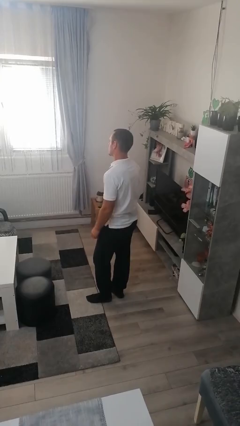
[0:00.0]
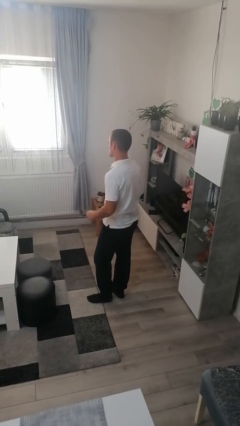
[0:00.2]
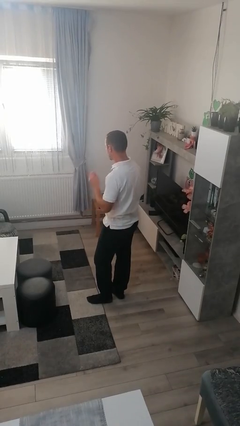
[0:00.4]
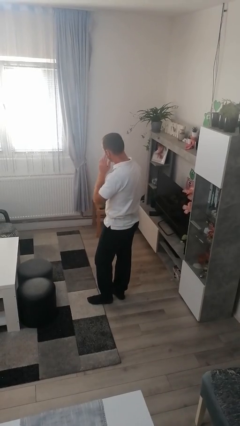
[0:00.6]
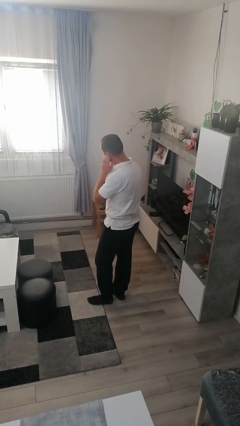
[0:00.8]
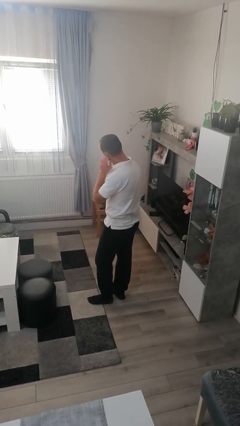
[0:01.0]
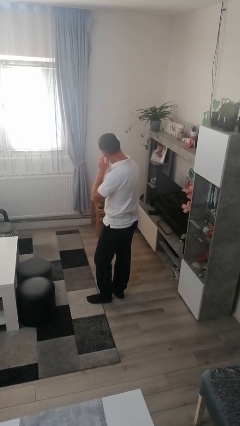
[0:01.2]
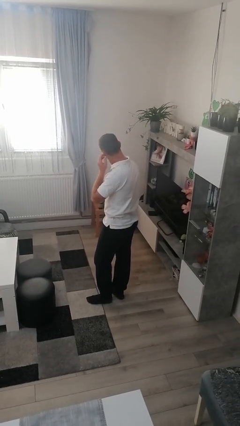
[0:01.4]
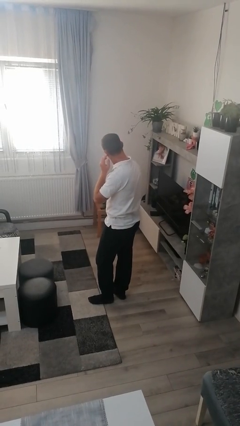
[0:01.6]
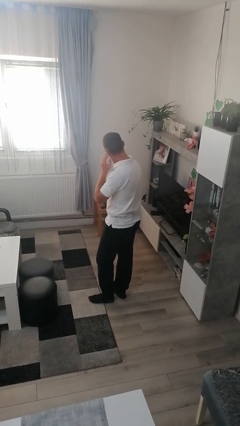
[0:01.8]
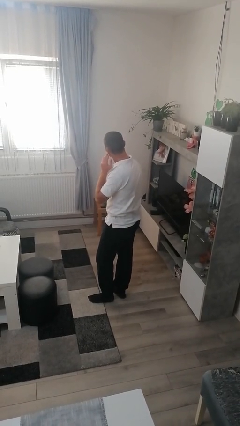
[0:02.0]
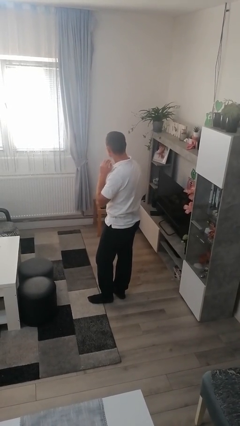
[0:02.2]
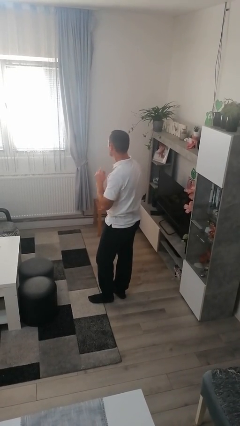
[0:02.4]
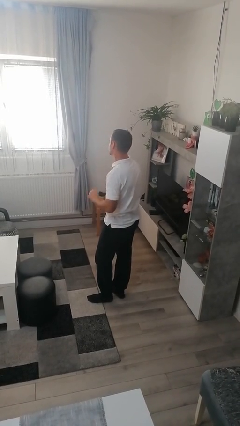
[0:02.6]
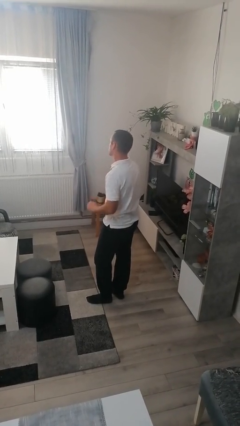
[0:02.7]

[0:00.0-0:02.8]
person touches earlobe

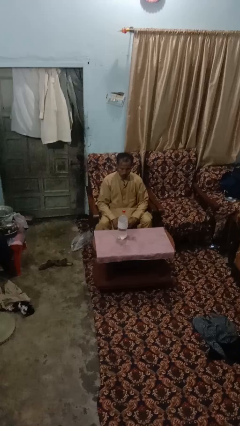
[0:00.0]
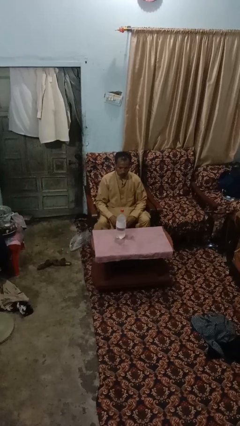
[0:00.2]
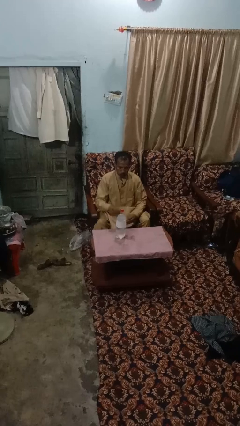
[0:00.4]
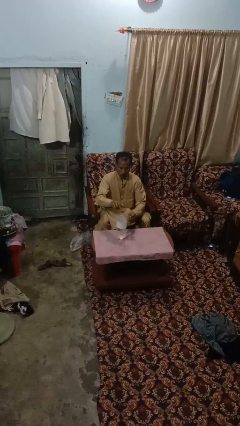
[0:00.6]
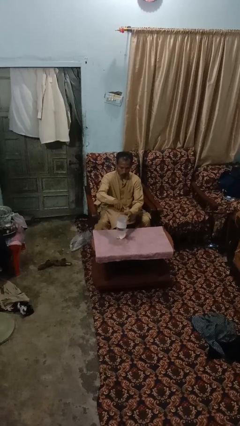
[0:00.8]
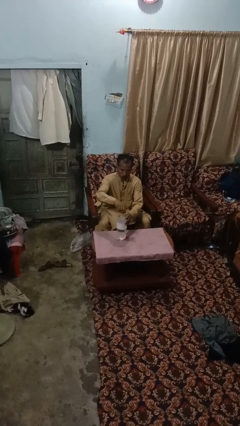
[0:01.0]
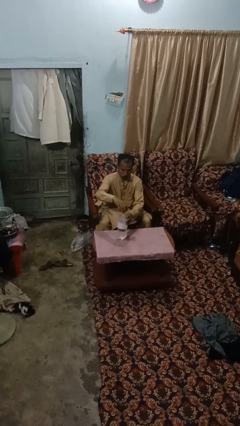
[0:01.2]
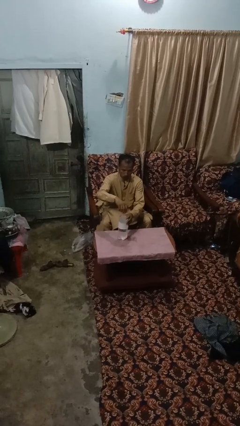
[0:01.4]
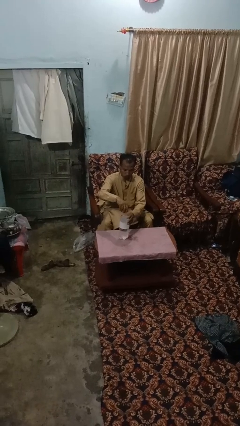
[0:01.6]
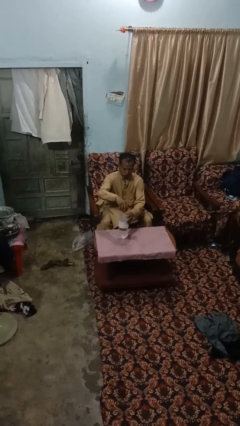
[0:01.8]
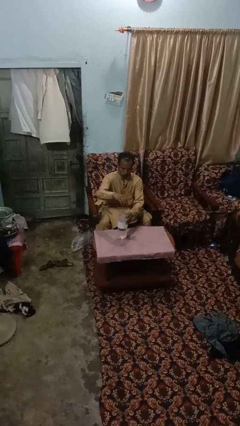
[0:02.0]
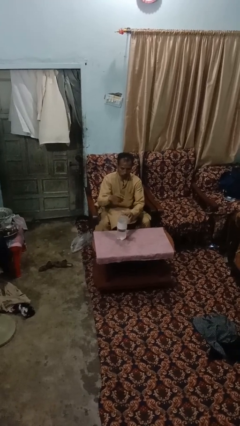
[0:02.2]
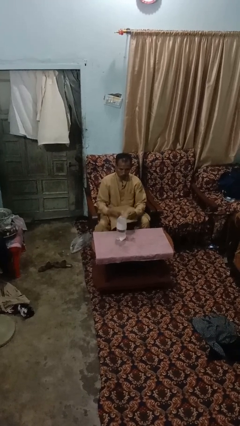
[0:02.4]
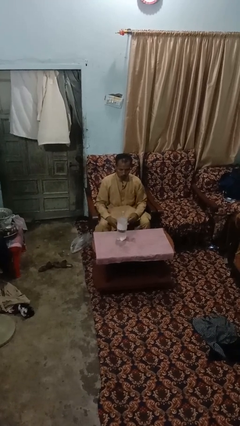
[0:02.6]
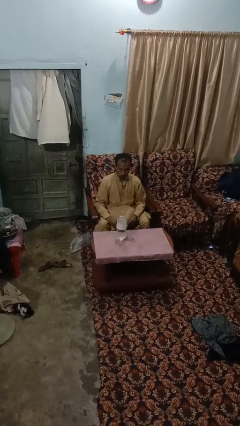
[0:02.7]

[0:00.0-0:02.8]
person unscrews lid from bottle

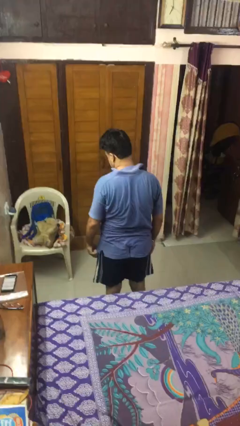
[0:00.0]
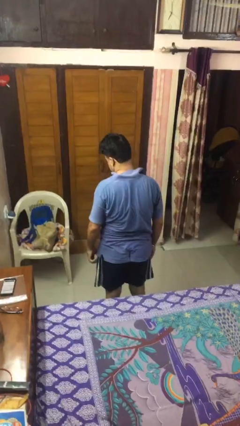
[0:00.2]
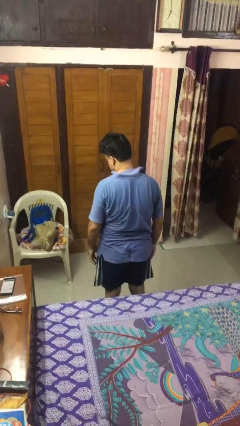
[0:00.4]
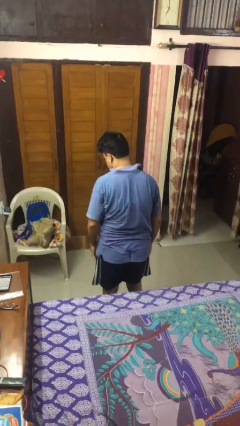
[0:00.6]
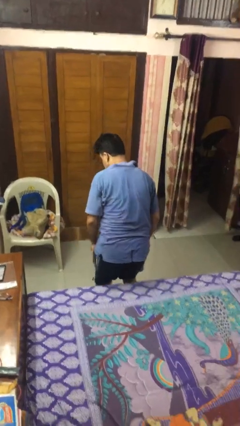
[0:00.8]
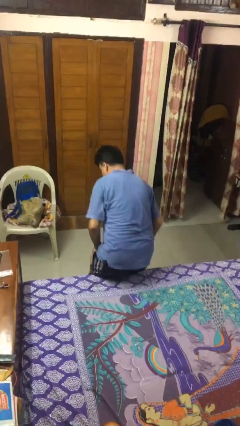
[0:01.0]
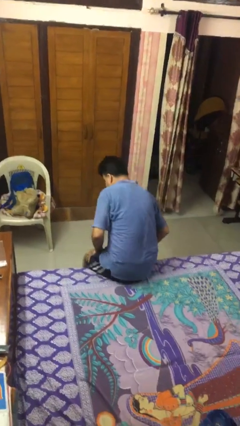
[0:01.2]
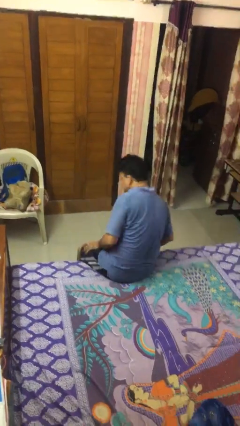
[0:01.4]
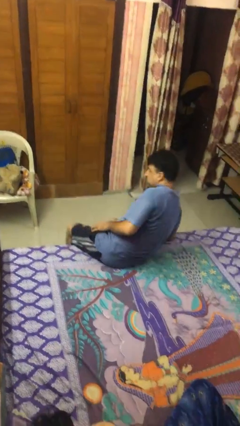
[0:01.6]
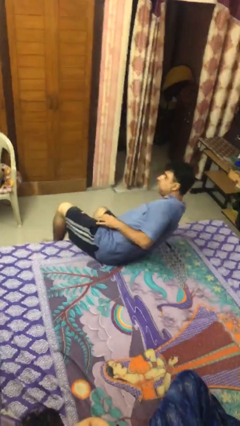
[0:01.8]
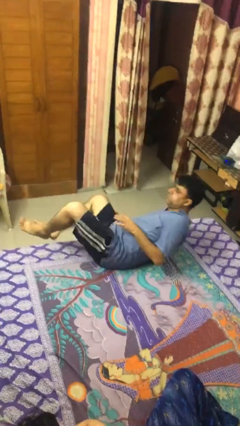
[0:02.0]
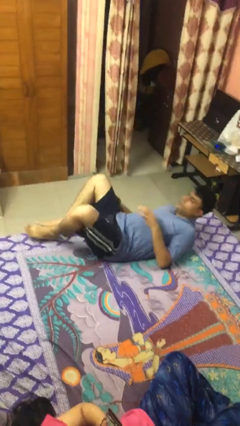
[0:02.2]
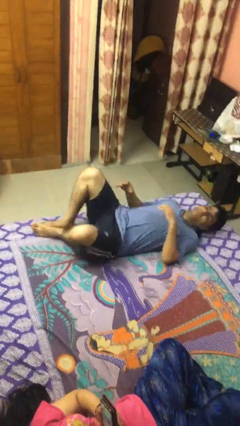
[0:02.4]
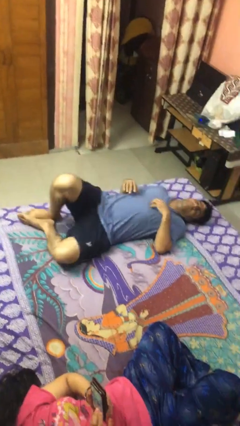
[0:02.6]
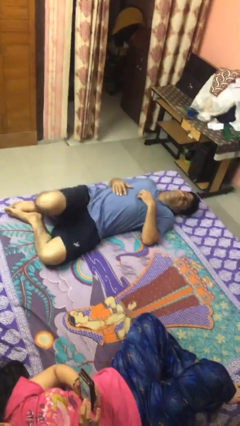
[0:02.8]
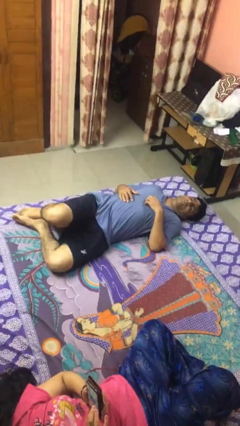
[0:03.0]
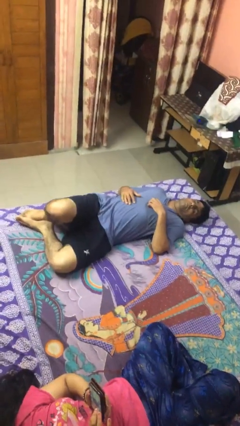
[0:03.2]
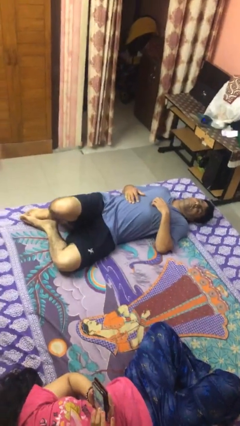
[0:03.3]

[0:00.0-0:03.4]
person lies down on bed

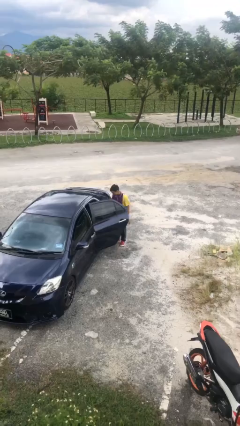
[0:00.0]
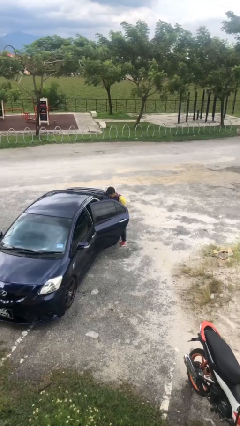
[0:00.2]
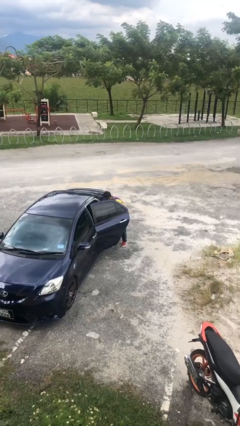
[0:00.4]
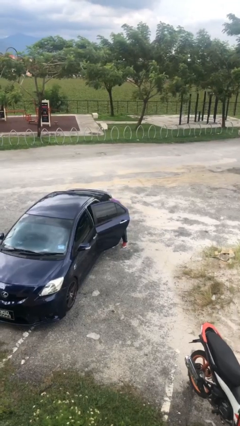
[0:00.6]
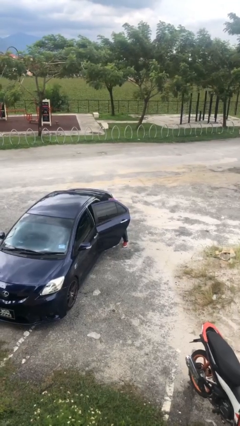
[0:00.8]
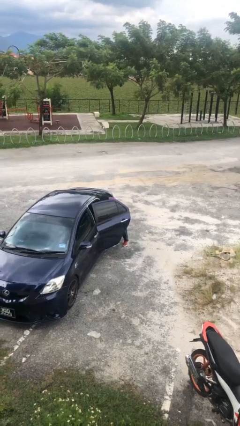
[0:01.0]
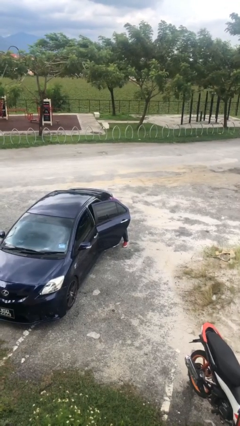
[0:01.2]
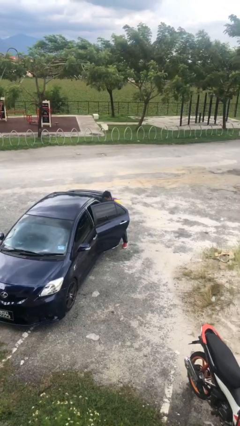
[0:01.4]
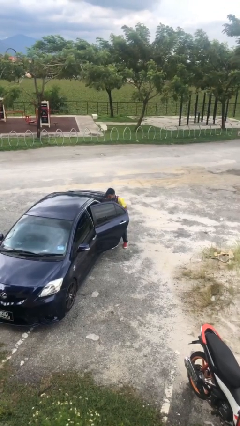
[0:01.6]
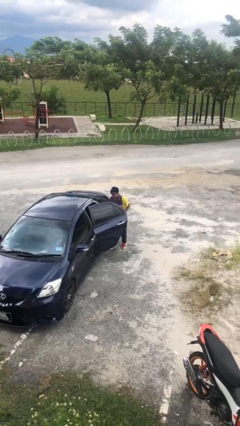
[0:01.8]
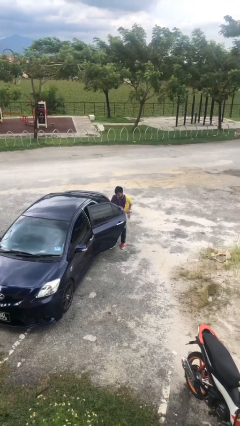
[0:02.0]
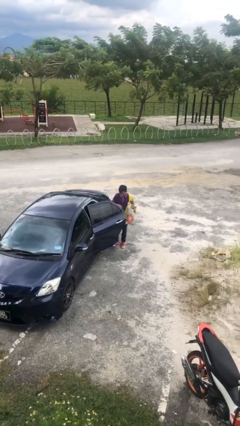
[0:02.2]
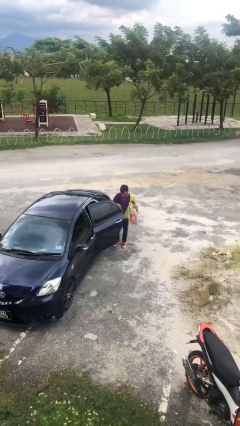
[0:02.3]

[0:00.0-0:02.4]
person unloads car

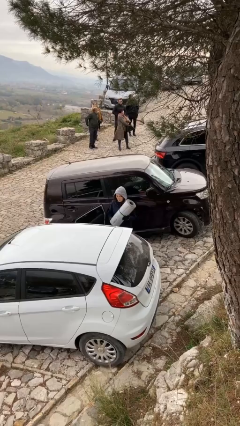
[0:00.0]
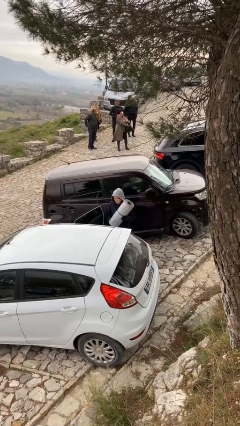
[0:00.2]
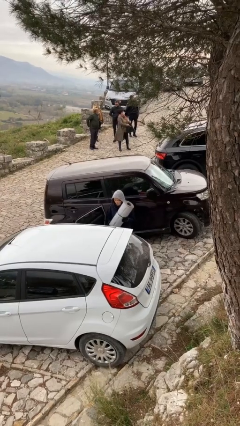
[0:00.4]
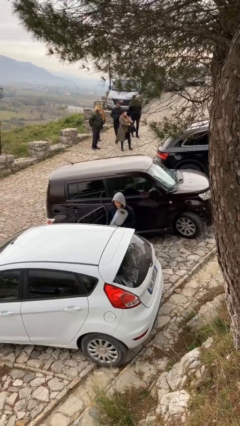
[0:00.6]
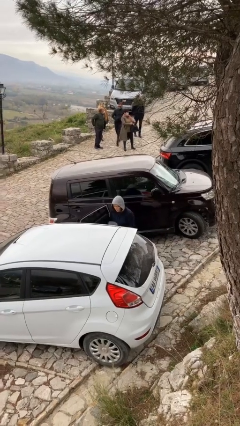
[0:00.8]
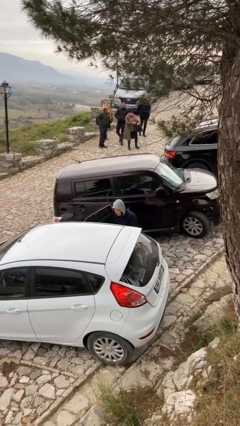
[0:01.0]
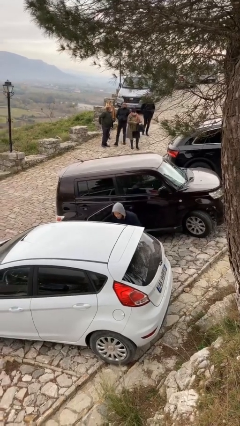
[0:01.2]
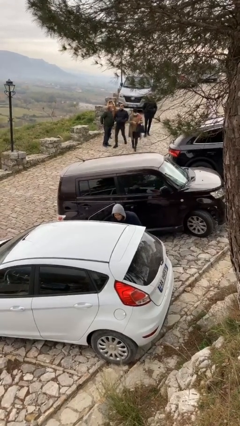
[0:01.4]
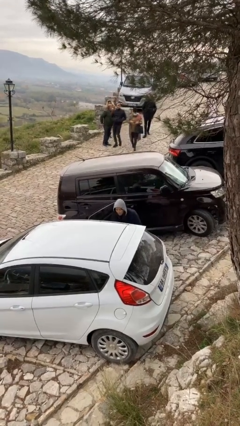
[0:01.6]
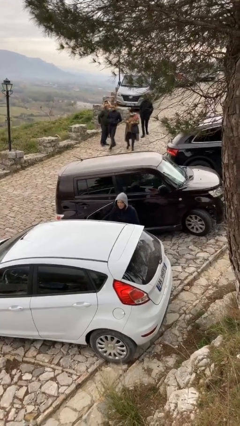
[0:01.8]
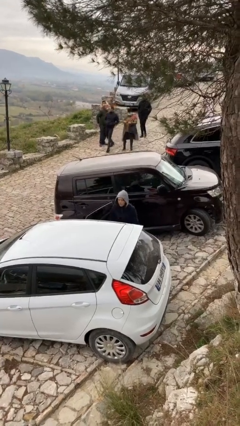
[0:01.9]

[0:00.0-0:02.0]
person loads car

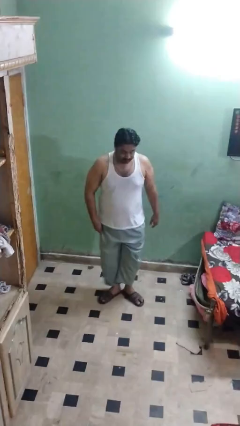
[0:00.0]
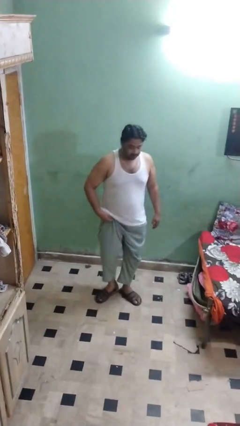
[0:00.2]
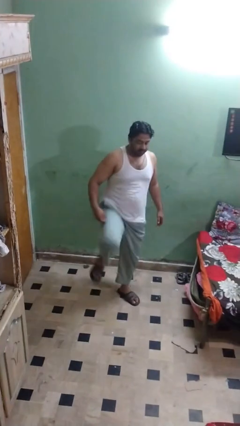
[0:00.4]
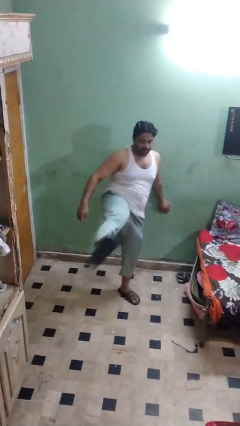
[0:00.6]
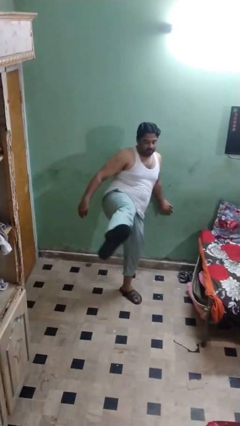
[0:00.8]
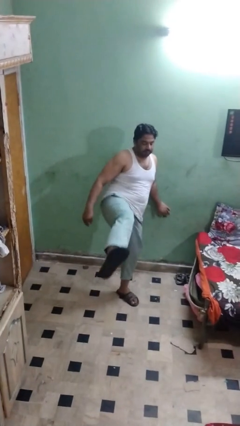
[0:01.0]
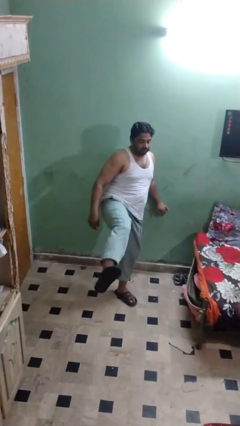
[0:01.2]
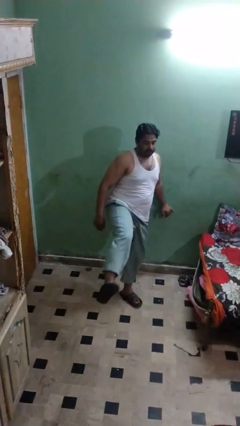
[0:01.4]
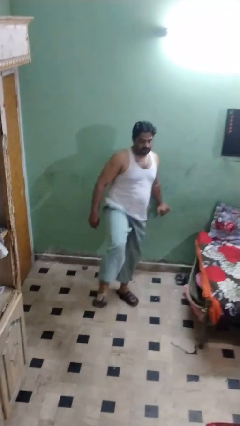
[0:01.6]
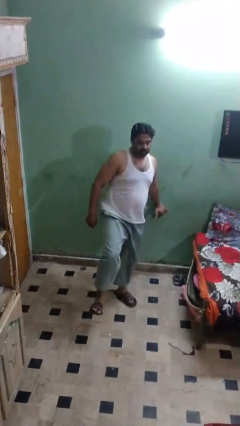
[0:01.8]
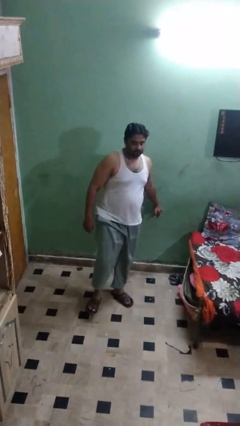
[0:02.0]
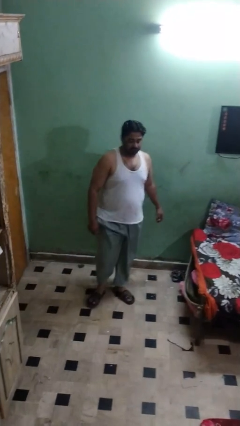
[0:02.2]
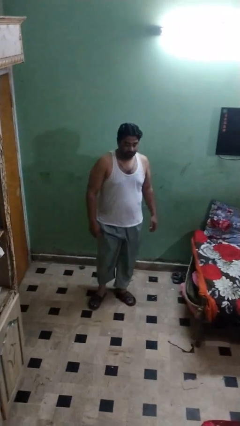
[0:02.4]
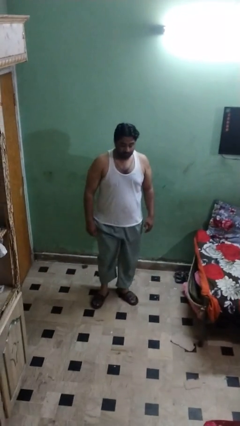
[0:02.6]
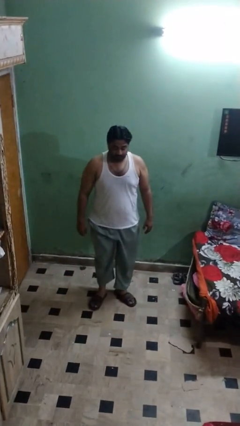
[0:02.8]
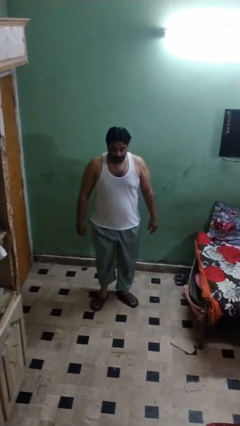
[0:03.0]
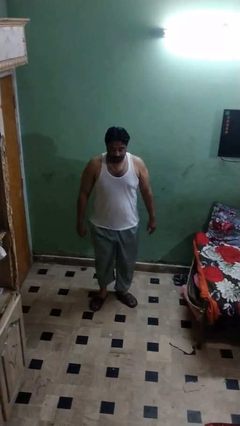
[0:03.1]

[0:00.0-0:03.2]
person karate kicks

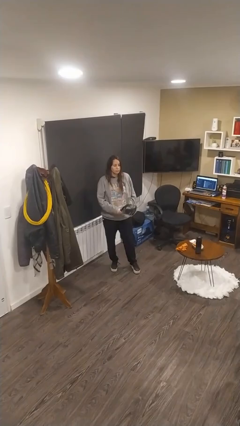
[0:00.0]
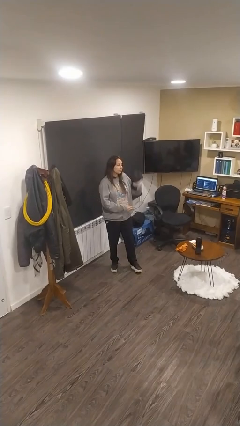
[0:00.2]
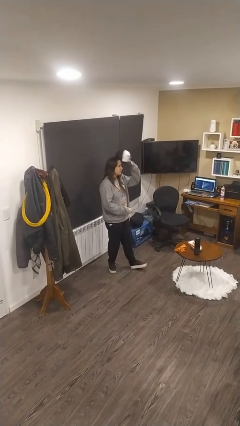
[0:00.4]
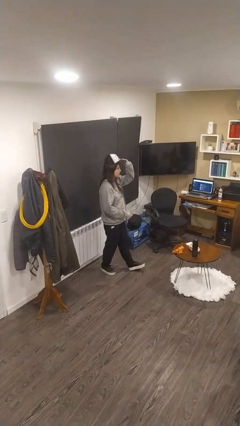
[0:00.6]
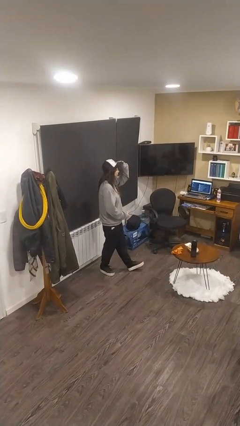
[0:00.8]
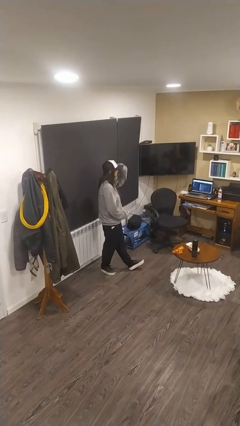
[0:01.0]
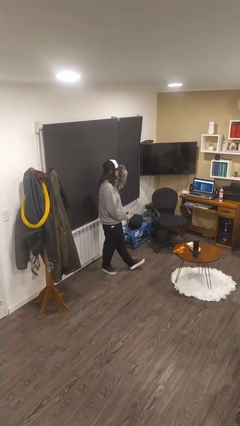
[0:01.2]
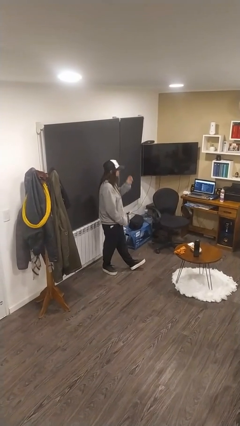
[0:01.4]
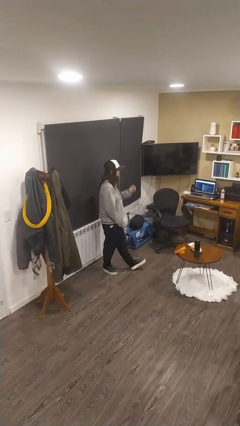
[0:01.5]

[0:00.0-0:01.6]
person puts on hat
